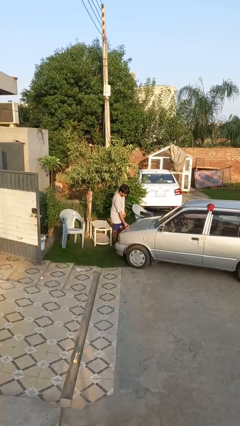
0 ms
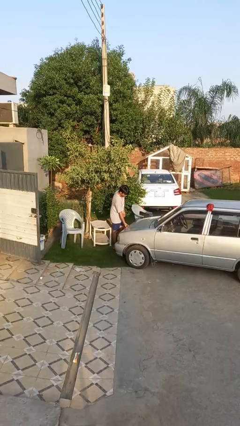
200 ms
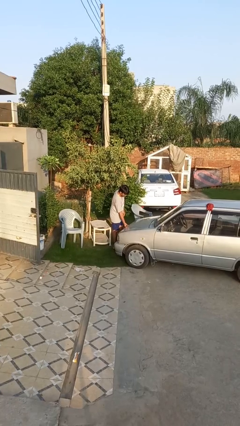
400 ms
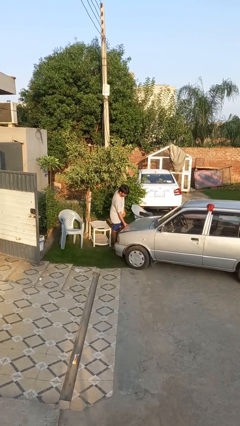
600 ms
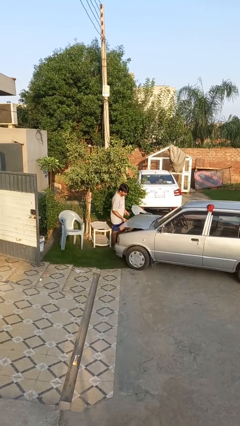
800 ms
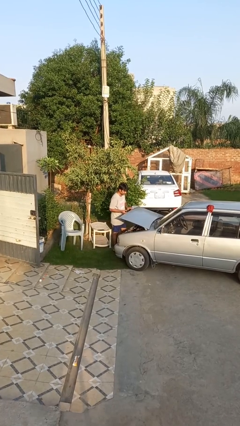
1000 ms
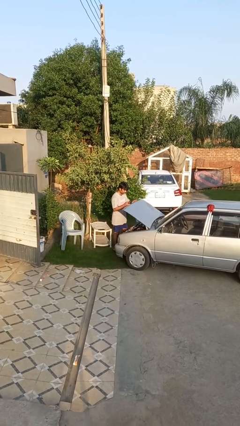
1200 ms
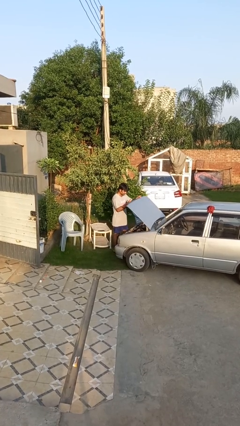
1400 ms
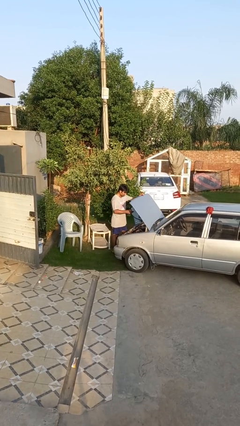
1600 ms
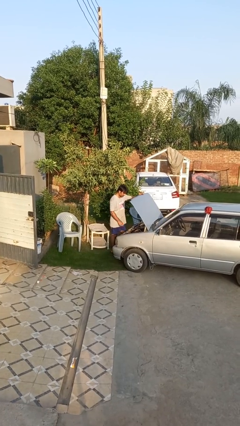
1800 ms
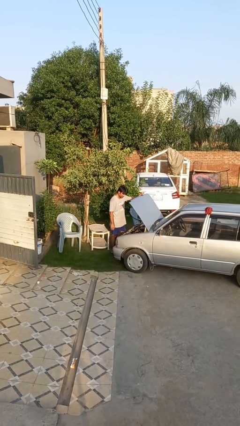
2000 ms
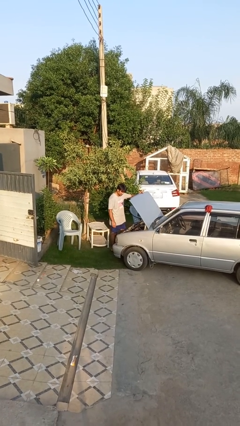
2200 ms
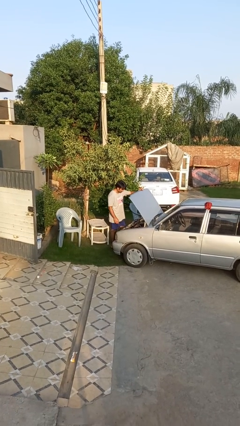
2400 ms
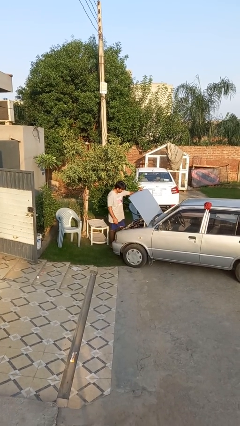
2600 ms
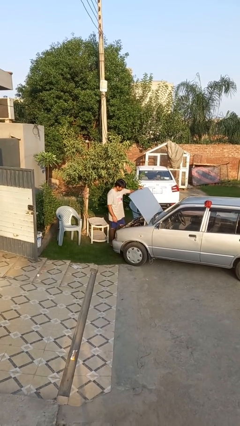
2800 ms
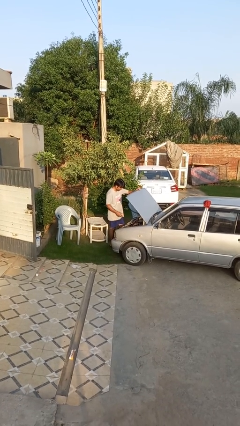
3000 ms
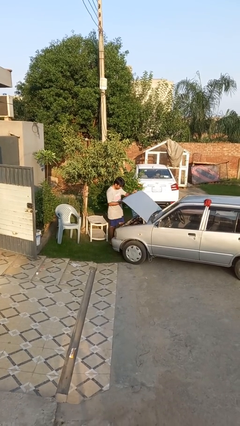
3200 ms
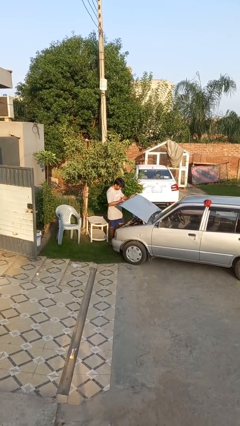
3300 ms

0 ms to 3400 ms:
person opens car hood

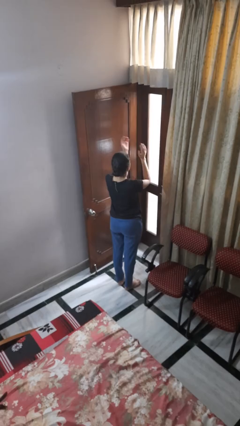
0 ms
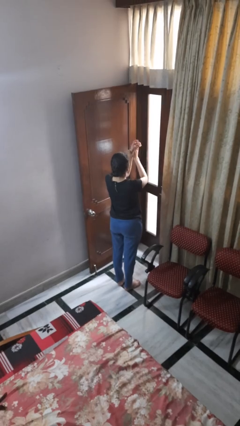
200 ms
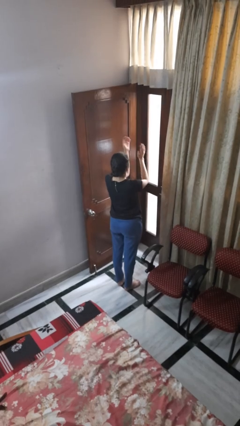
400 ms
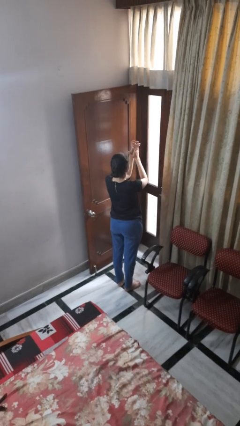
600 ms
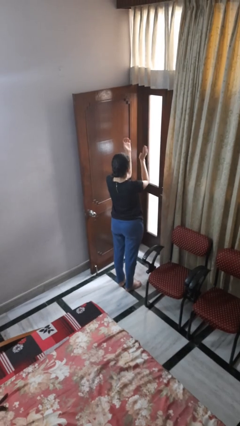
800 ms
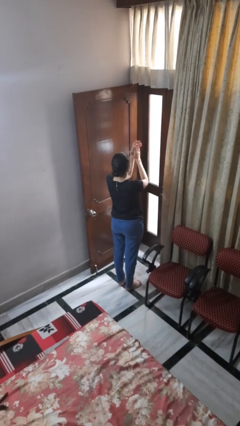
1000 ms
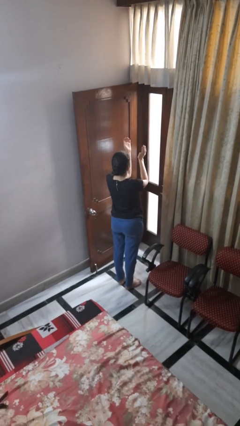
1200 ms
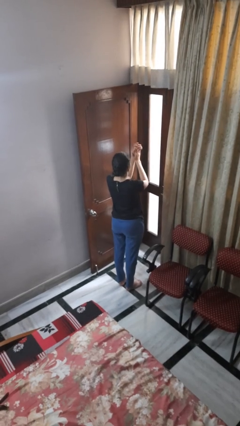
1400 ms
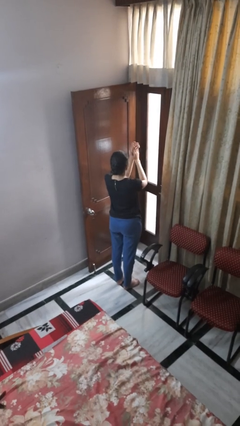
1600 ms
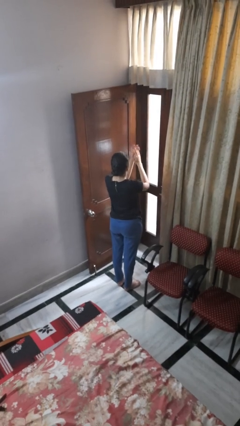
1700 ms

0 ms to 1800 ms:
person claps hands

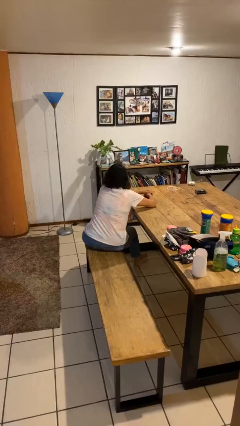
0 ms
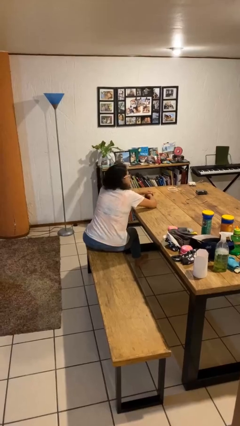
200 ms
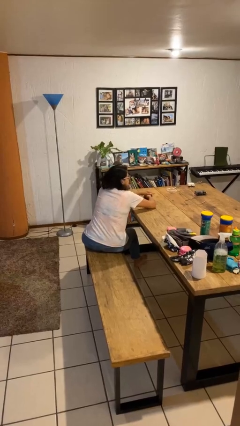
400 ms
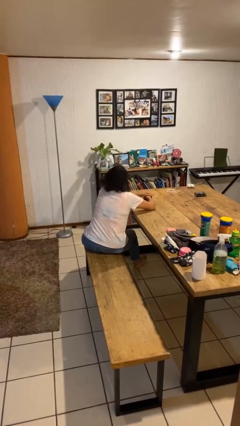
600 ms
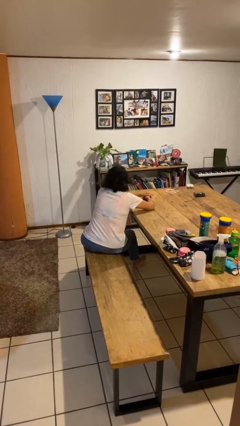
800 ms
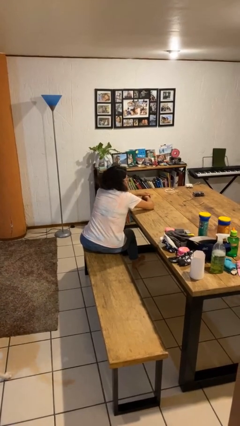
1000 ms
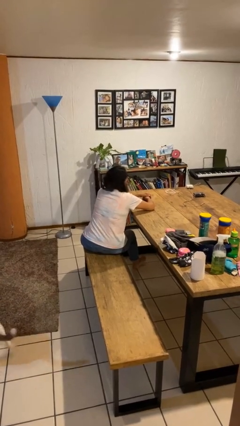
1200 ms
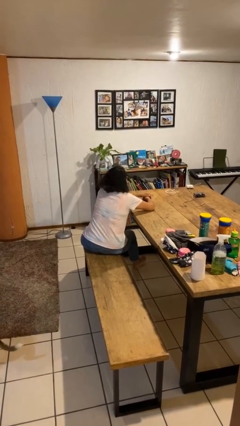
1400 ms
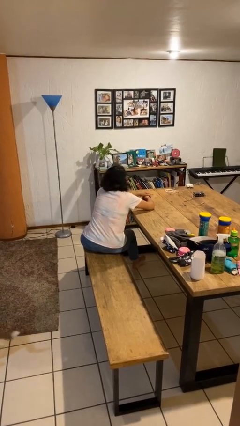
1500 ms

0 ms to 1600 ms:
person shakes head

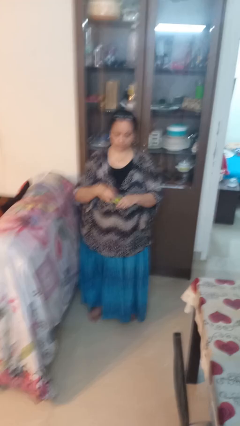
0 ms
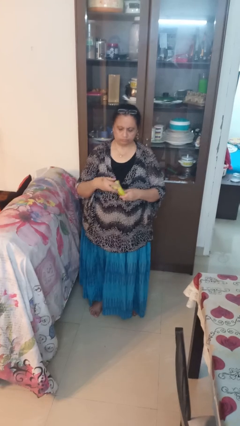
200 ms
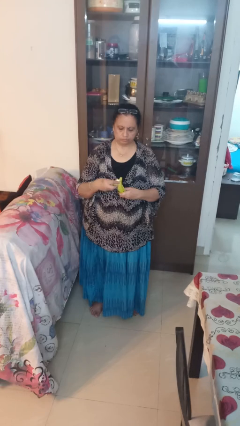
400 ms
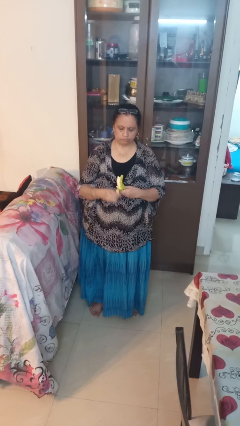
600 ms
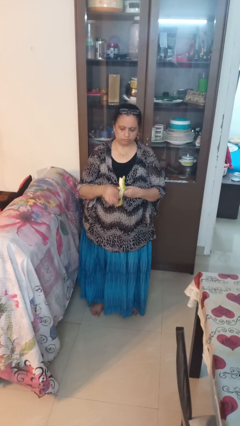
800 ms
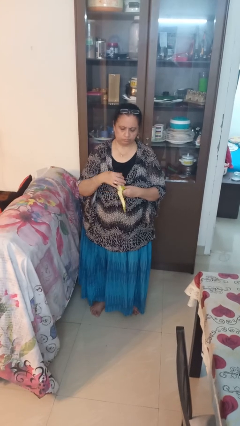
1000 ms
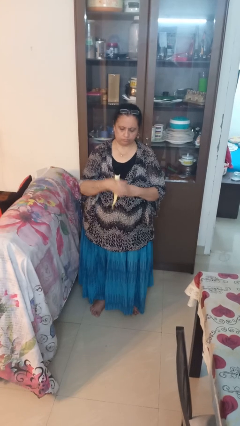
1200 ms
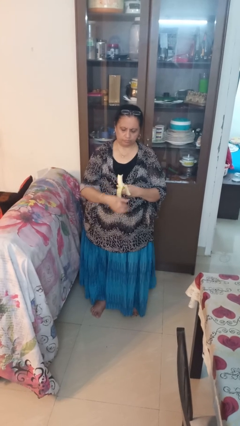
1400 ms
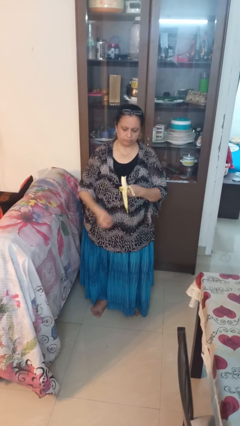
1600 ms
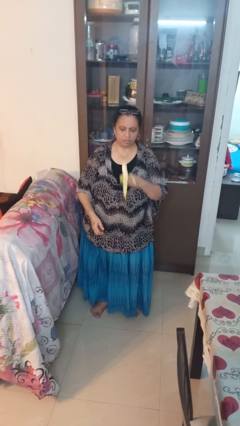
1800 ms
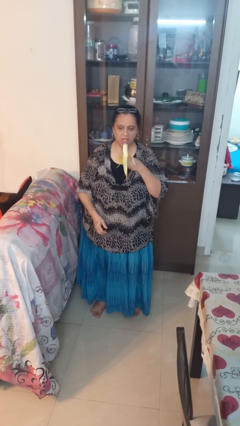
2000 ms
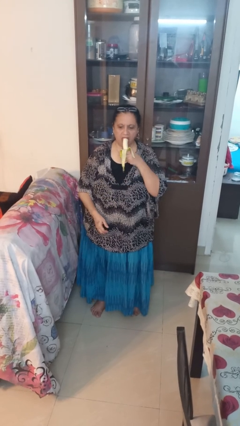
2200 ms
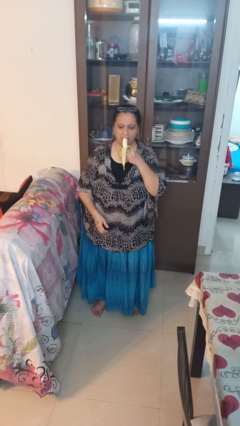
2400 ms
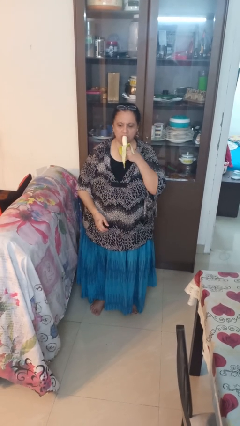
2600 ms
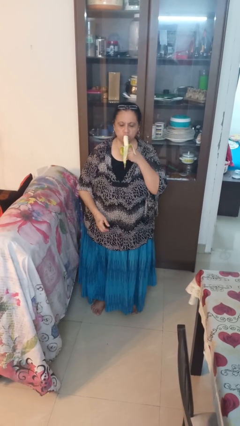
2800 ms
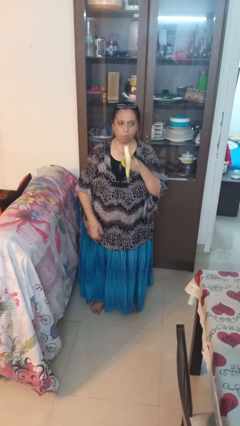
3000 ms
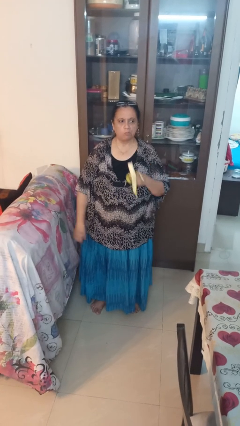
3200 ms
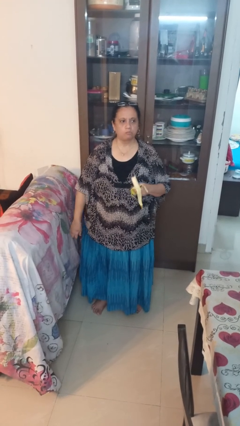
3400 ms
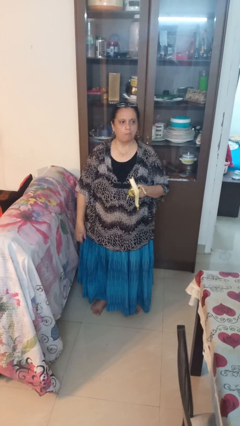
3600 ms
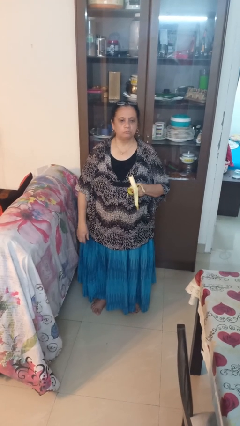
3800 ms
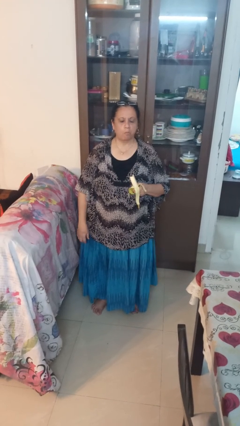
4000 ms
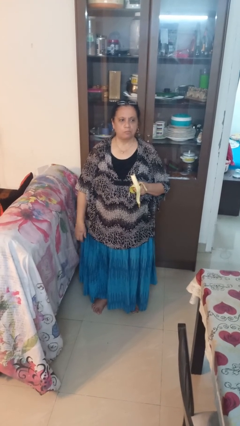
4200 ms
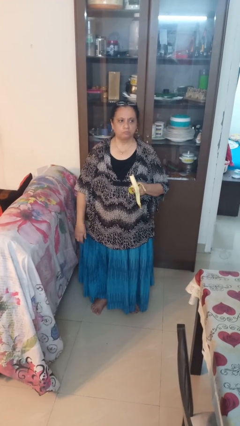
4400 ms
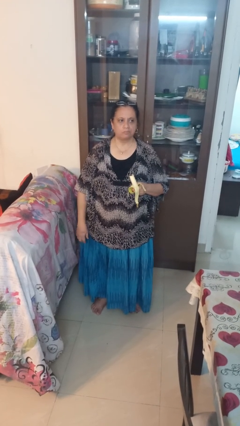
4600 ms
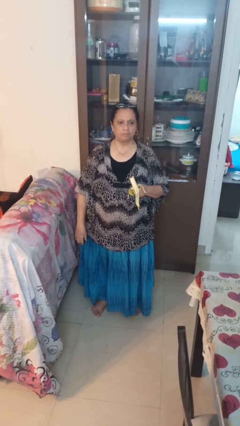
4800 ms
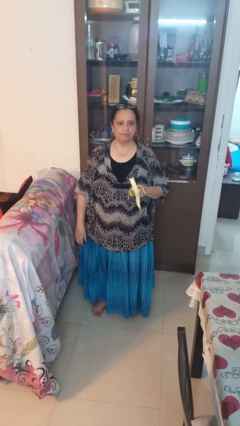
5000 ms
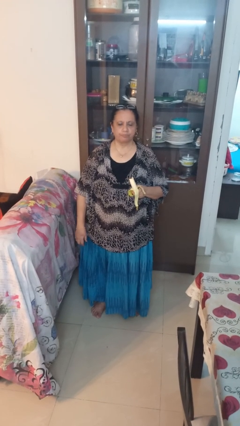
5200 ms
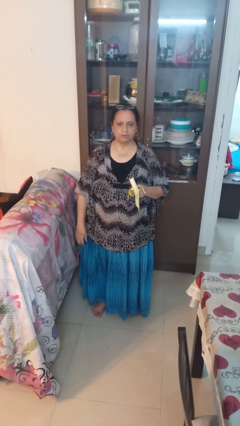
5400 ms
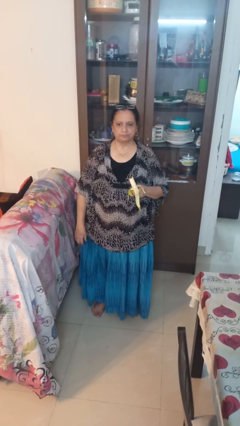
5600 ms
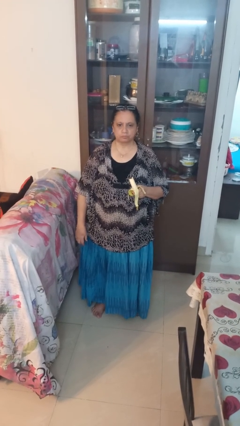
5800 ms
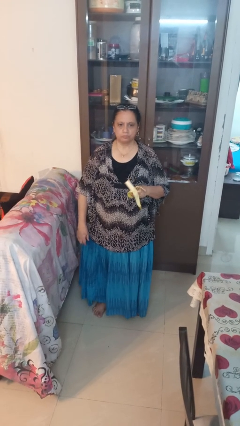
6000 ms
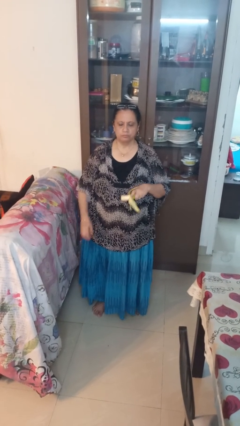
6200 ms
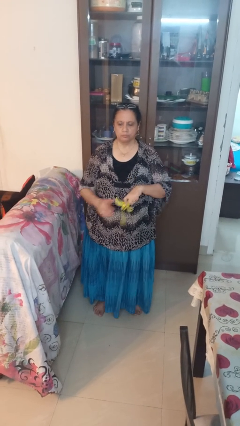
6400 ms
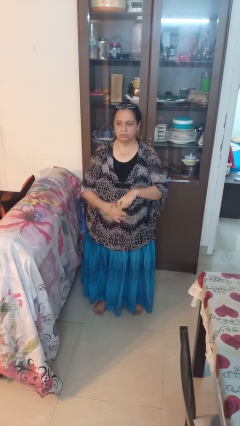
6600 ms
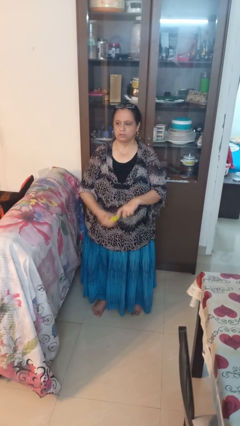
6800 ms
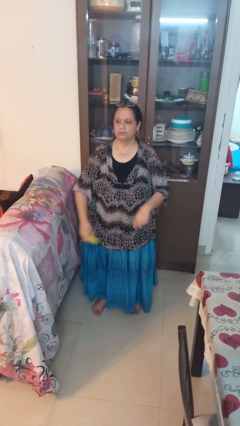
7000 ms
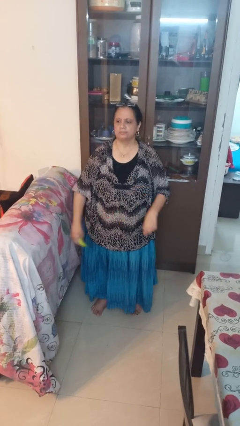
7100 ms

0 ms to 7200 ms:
person eats banana

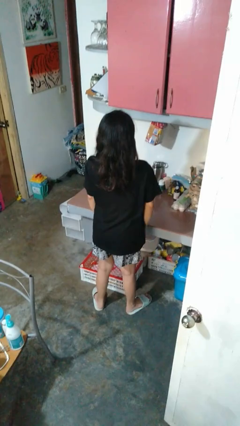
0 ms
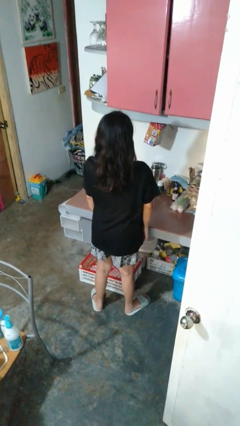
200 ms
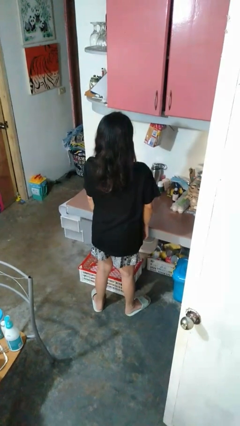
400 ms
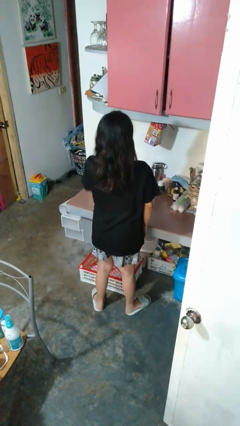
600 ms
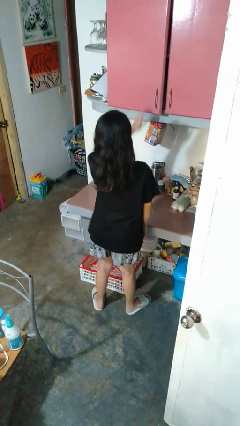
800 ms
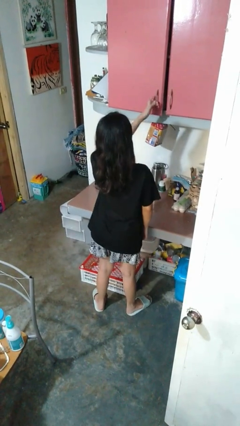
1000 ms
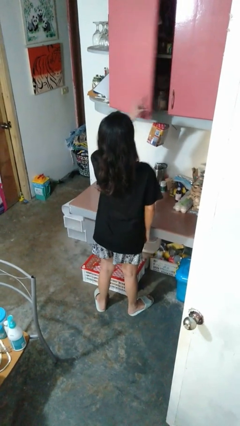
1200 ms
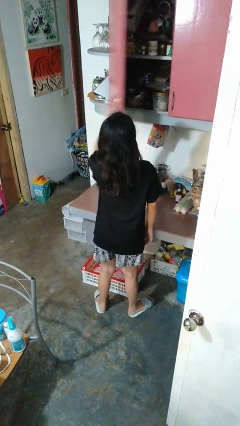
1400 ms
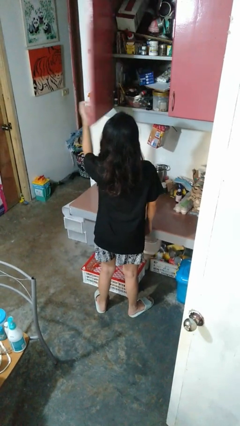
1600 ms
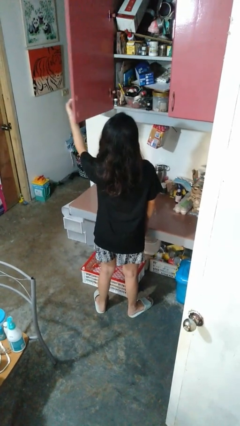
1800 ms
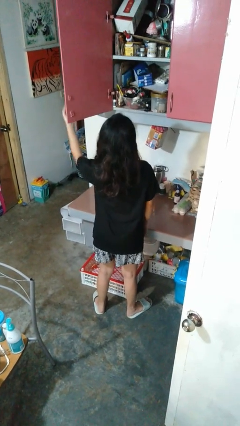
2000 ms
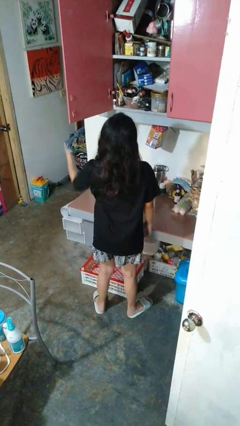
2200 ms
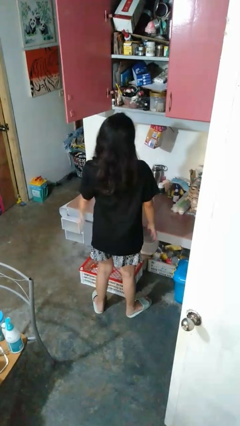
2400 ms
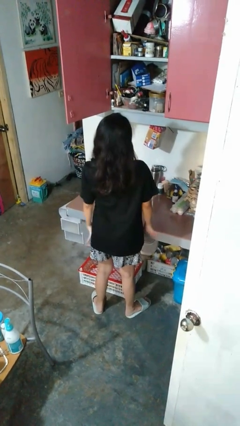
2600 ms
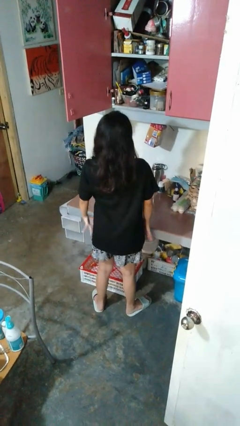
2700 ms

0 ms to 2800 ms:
person opens cabinet

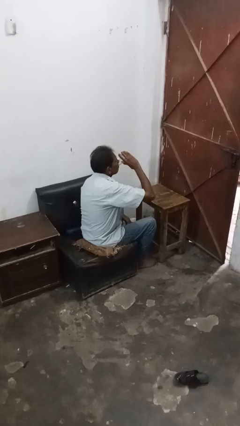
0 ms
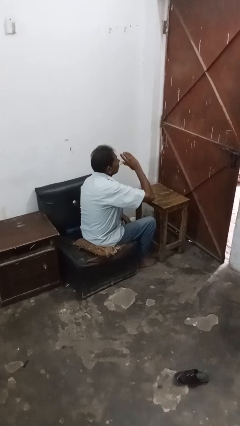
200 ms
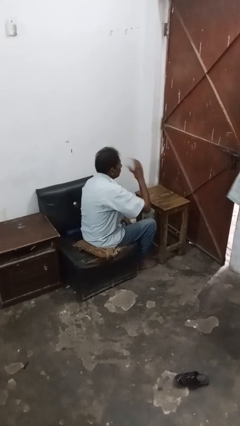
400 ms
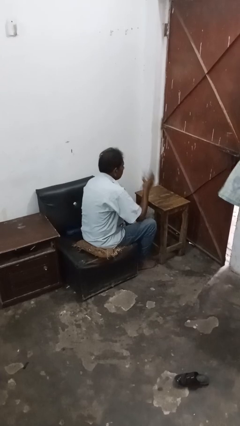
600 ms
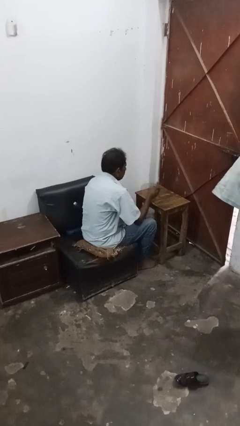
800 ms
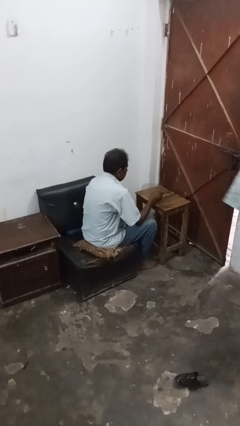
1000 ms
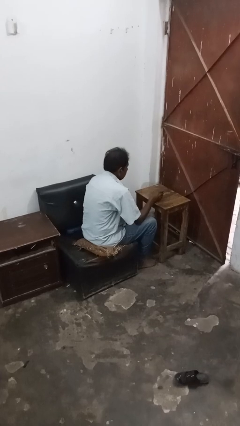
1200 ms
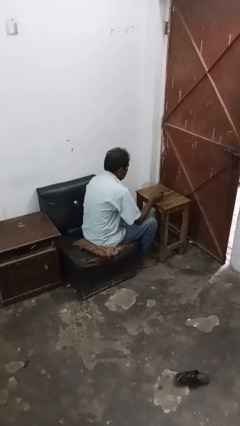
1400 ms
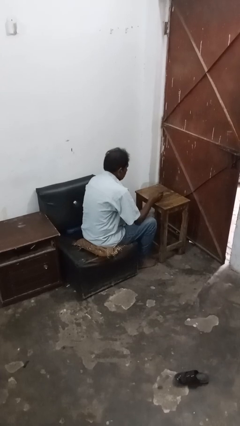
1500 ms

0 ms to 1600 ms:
person puts down object on table
